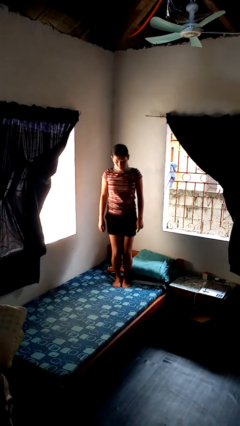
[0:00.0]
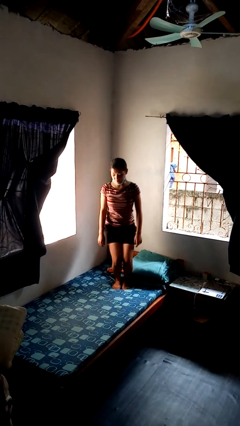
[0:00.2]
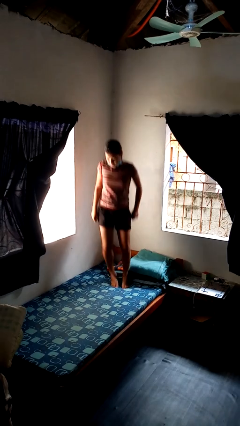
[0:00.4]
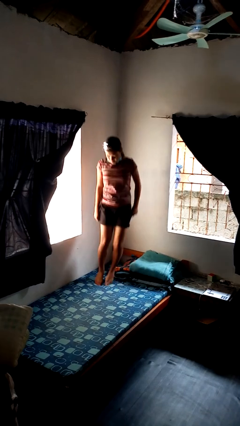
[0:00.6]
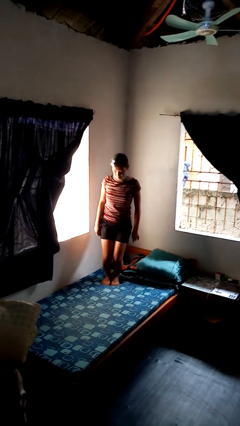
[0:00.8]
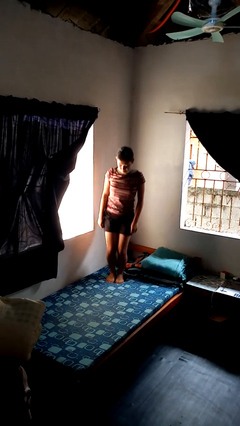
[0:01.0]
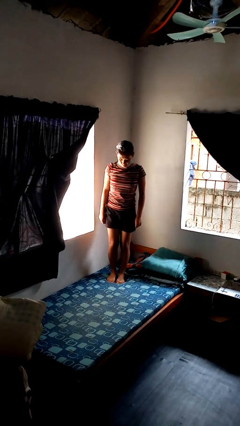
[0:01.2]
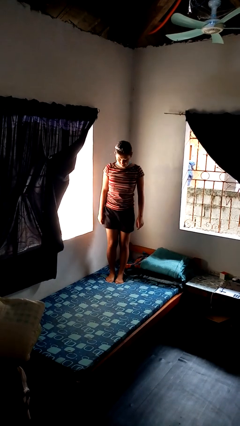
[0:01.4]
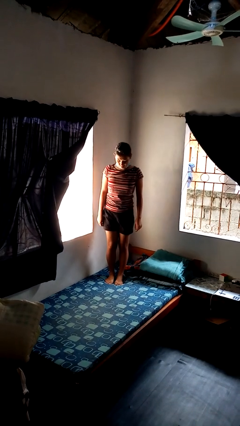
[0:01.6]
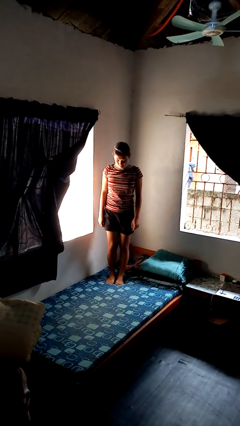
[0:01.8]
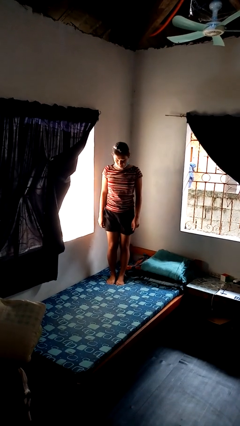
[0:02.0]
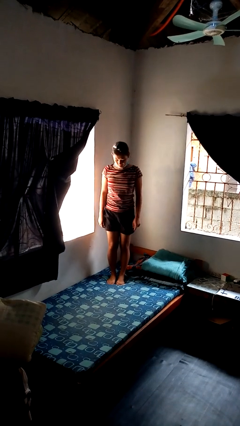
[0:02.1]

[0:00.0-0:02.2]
person jumps on bed

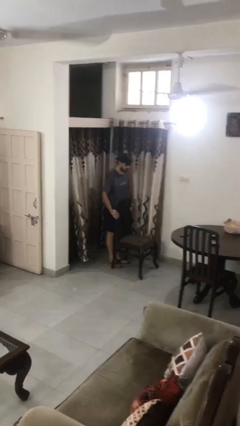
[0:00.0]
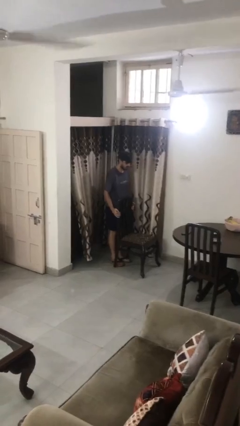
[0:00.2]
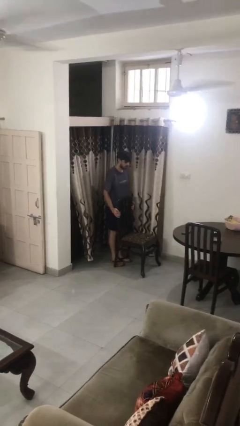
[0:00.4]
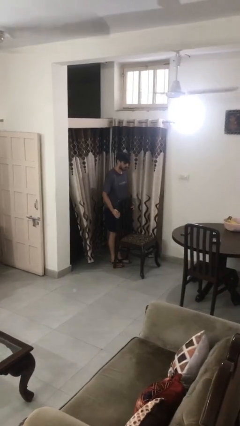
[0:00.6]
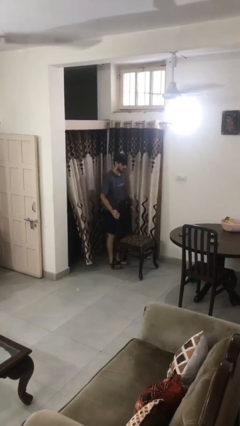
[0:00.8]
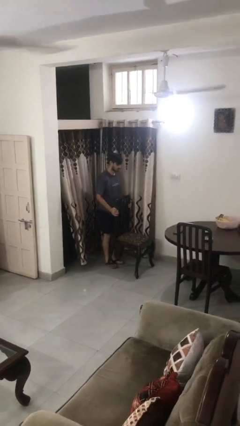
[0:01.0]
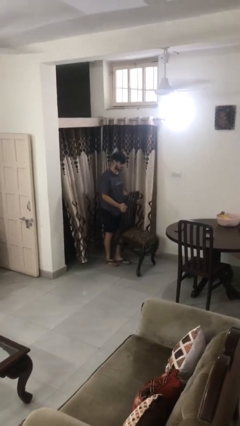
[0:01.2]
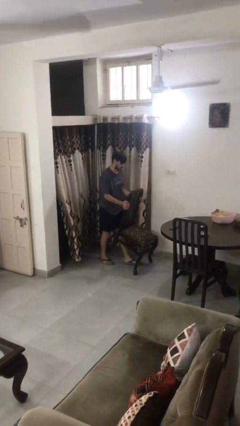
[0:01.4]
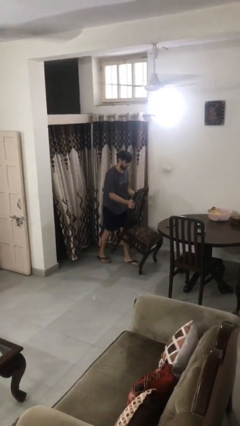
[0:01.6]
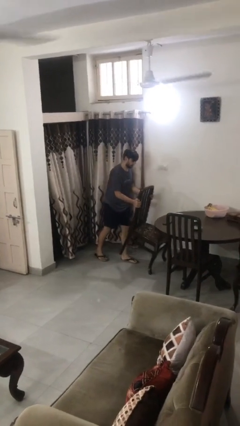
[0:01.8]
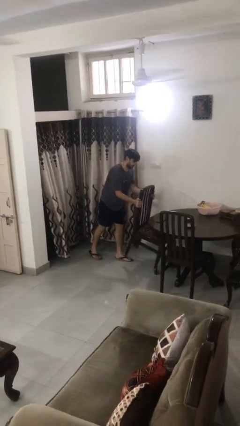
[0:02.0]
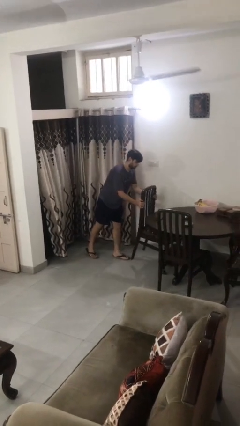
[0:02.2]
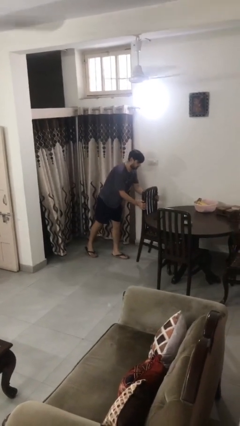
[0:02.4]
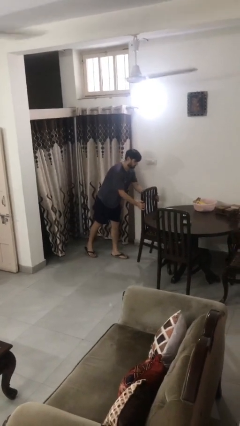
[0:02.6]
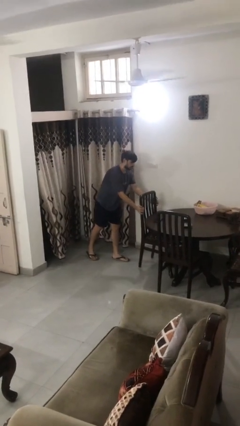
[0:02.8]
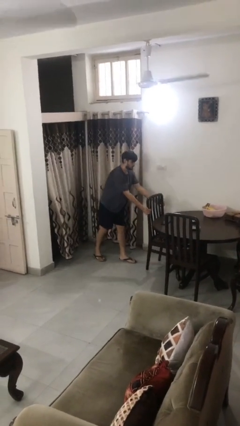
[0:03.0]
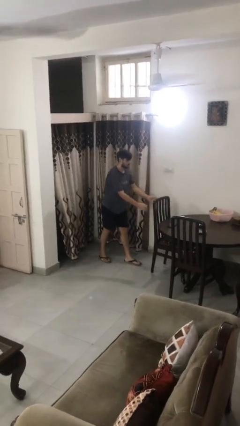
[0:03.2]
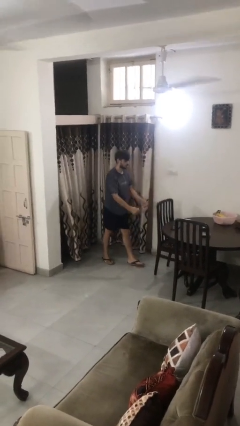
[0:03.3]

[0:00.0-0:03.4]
person pushes in chair

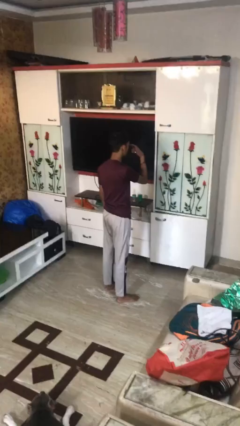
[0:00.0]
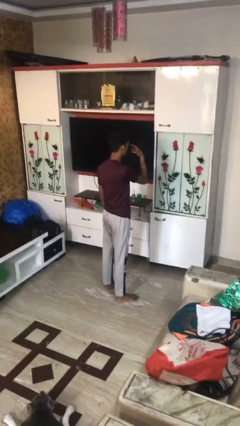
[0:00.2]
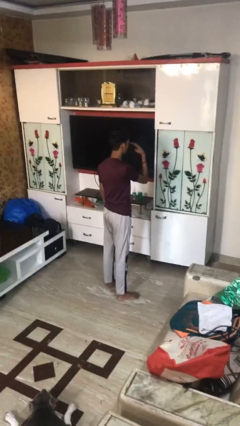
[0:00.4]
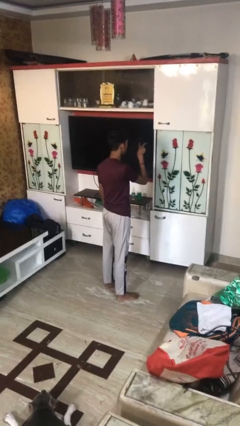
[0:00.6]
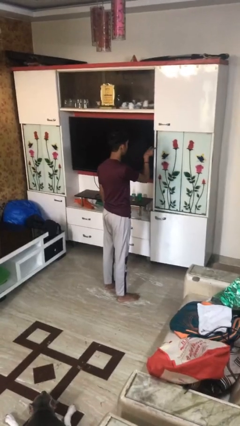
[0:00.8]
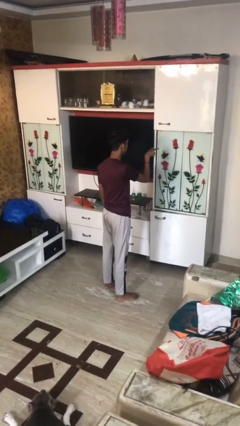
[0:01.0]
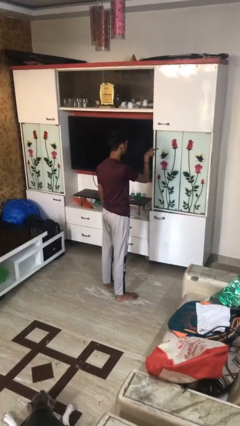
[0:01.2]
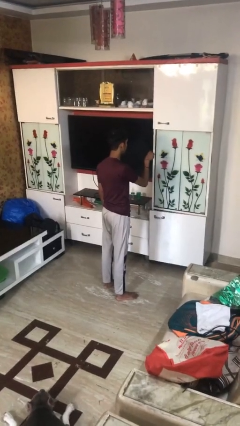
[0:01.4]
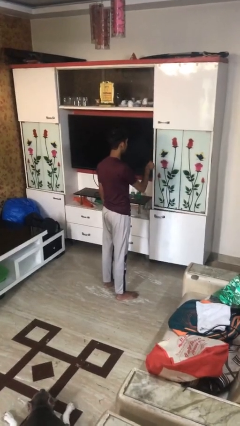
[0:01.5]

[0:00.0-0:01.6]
person gestures watch closely

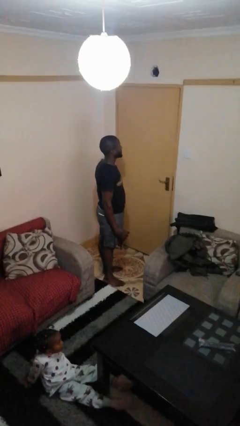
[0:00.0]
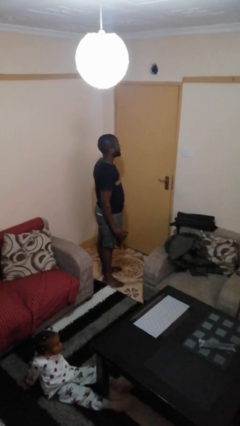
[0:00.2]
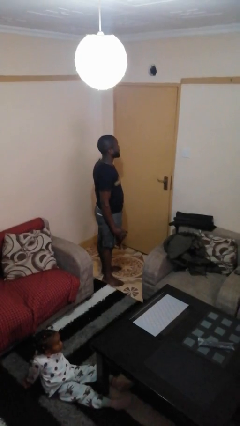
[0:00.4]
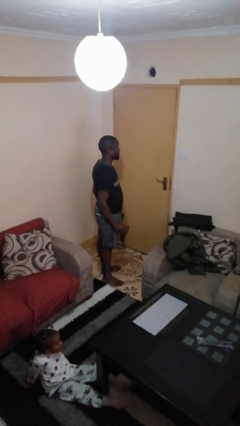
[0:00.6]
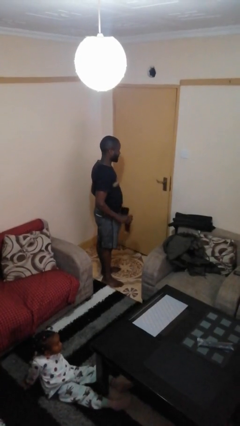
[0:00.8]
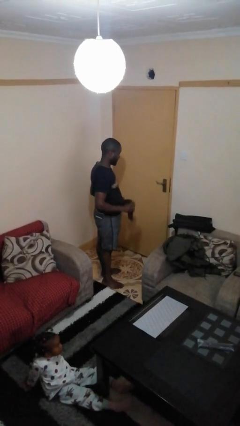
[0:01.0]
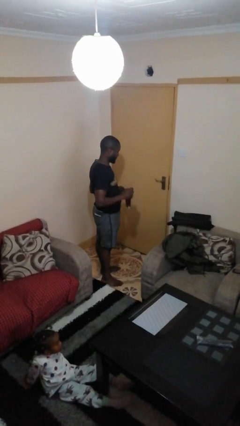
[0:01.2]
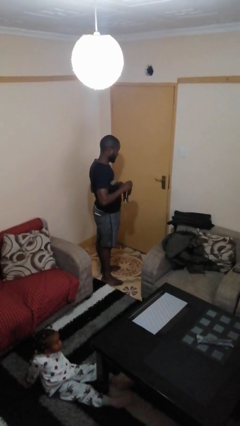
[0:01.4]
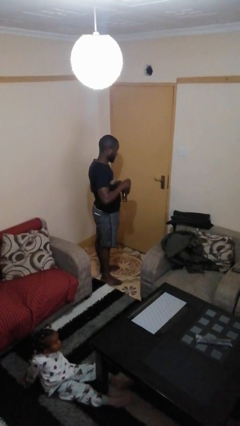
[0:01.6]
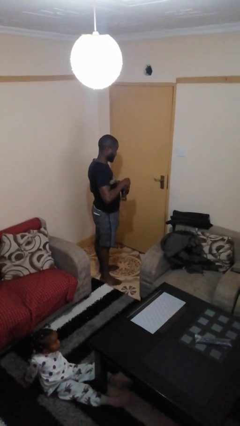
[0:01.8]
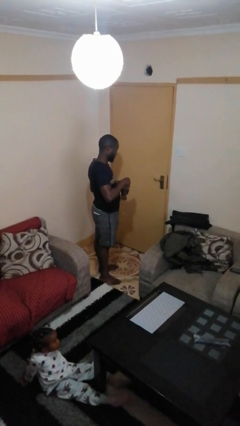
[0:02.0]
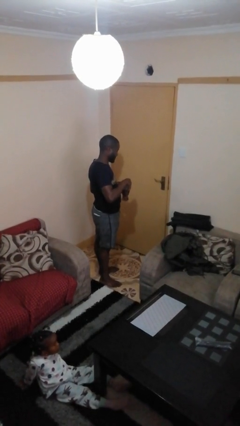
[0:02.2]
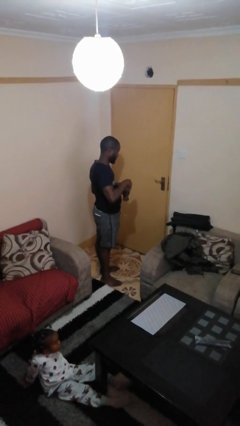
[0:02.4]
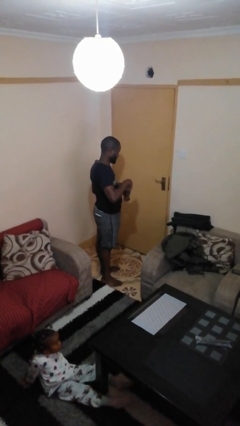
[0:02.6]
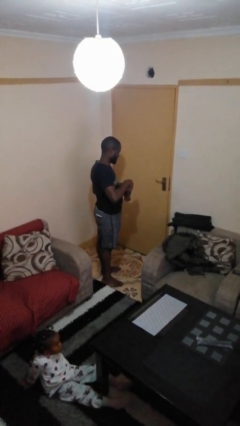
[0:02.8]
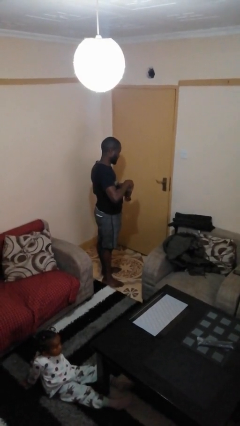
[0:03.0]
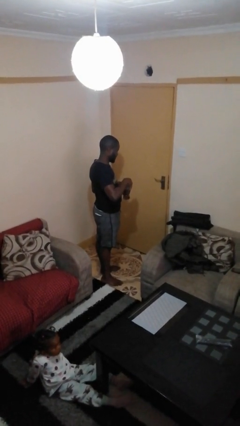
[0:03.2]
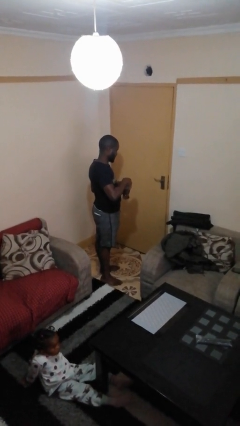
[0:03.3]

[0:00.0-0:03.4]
person pours coffee into mug

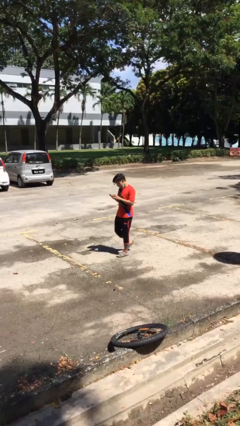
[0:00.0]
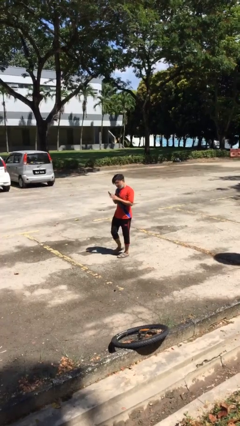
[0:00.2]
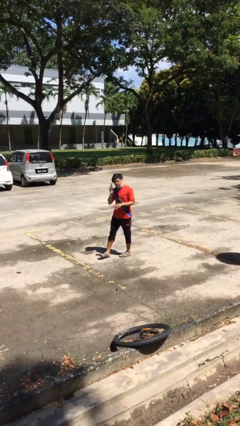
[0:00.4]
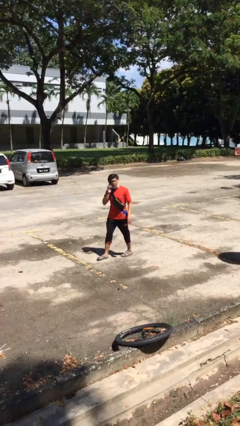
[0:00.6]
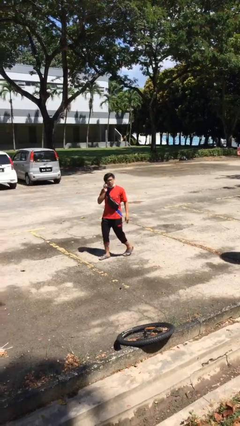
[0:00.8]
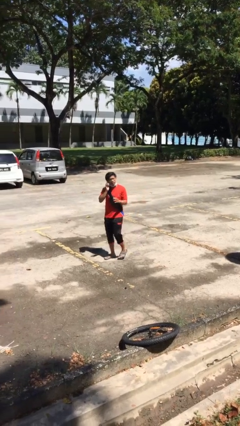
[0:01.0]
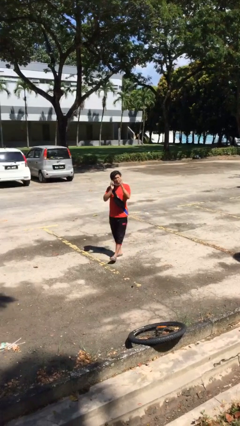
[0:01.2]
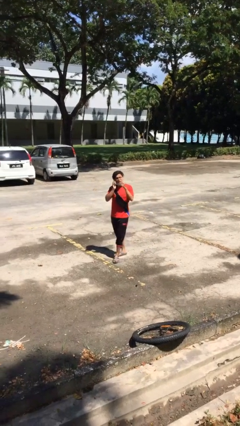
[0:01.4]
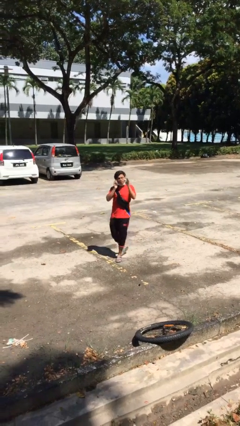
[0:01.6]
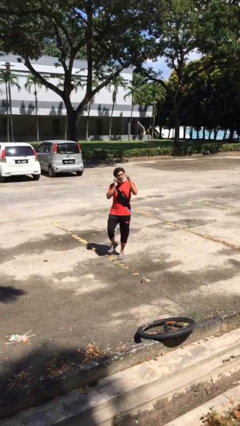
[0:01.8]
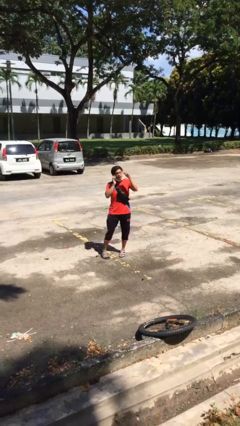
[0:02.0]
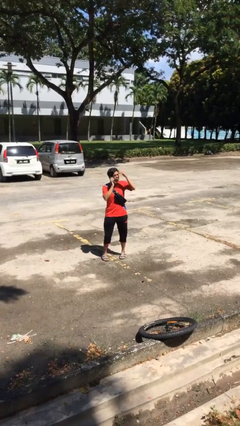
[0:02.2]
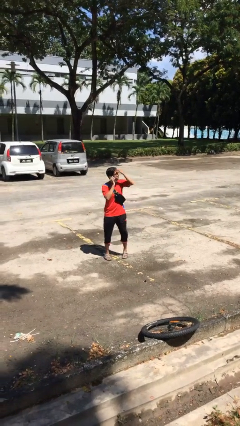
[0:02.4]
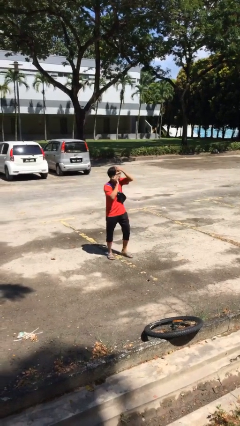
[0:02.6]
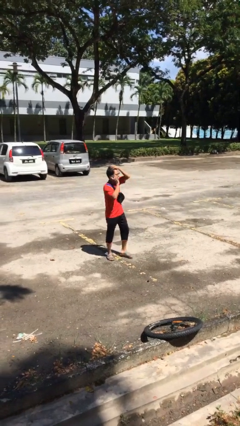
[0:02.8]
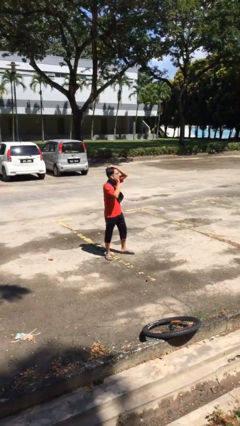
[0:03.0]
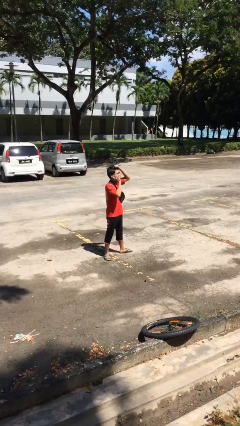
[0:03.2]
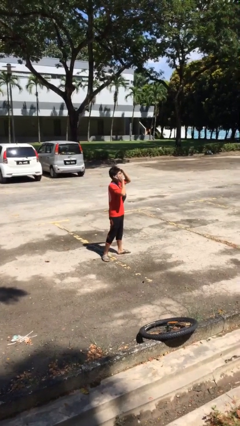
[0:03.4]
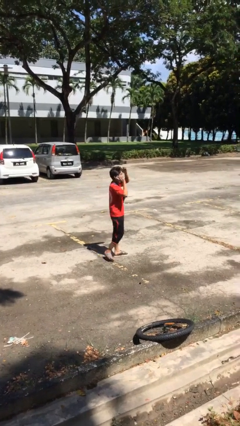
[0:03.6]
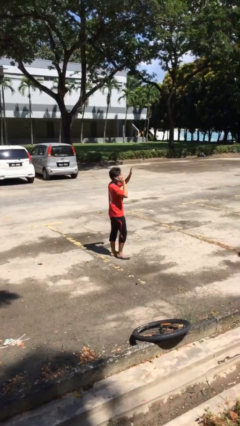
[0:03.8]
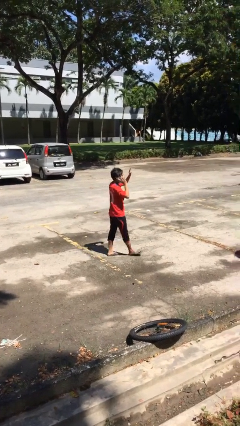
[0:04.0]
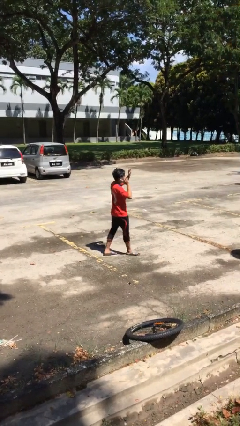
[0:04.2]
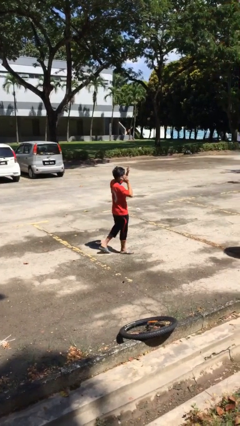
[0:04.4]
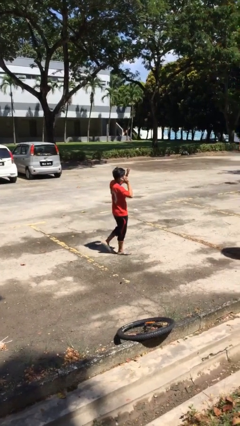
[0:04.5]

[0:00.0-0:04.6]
person talks on phone

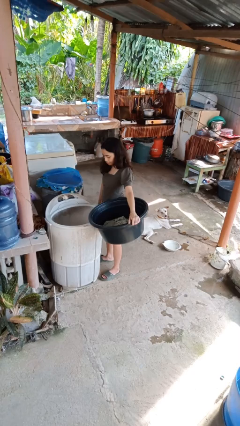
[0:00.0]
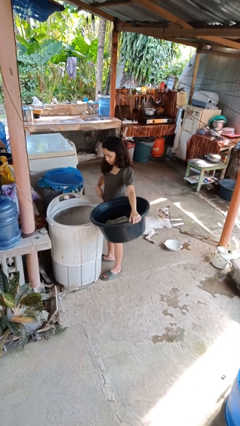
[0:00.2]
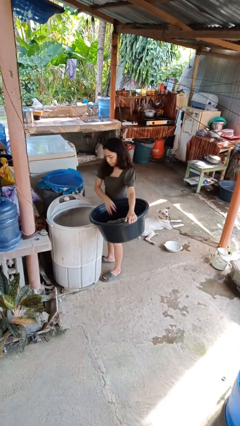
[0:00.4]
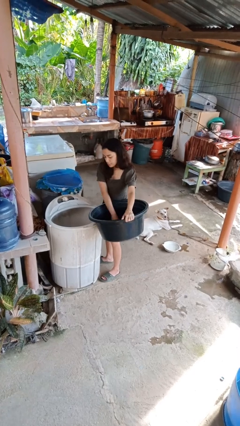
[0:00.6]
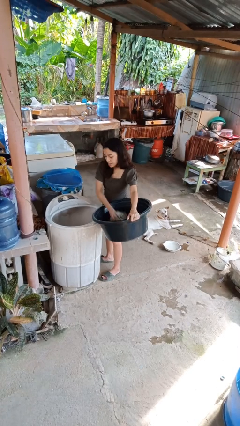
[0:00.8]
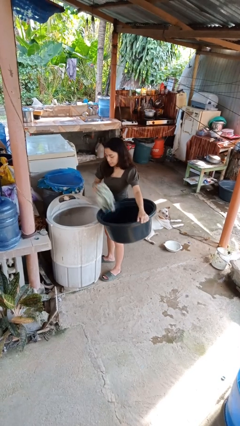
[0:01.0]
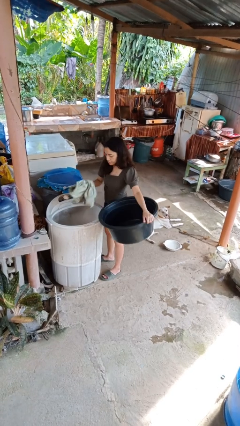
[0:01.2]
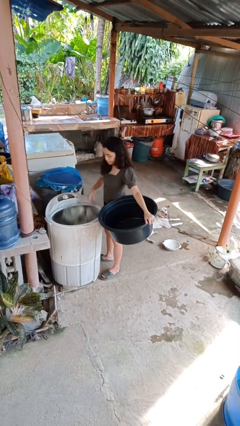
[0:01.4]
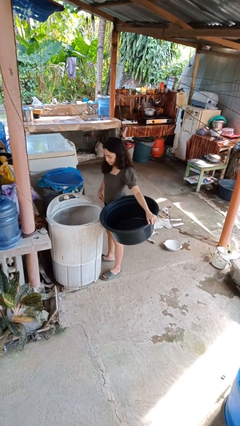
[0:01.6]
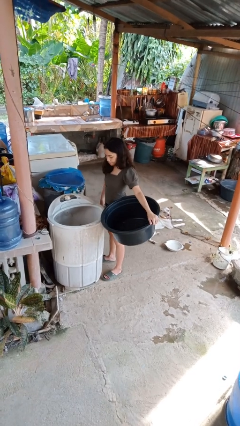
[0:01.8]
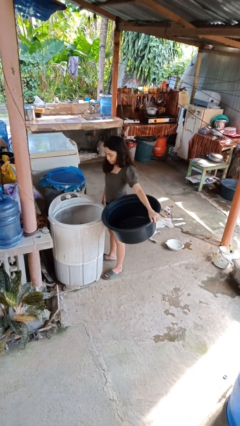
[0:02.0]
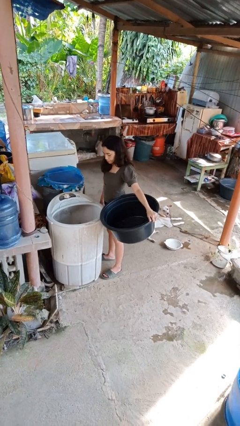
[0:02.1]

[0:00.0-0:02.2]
person loads clotheswasher

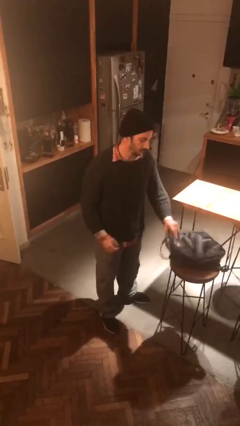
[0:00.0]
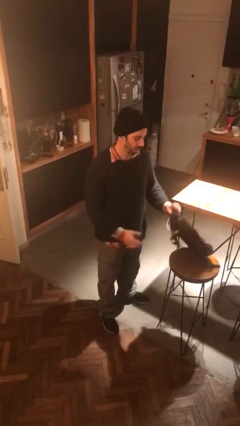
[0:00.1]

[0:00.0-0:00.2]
person puts on backpack
